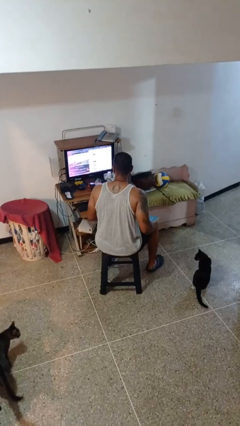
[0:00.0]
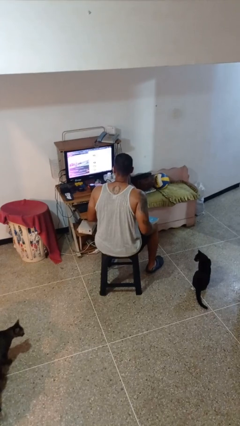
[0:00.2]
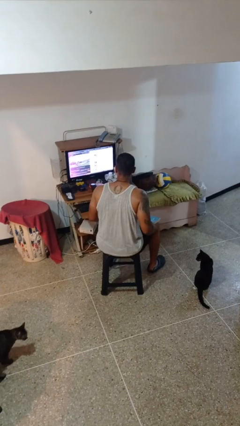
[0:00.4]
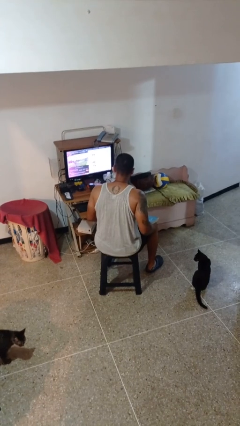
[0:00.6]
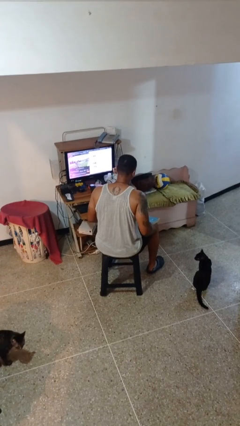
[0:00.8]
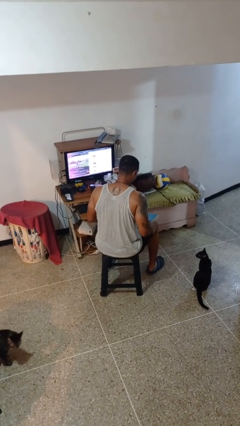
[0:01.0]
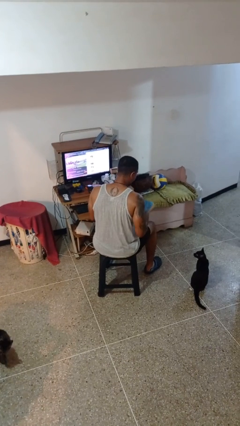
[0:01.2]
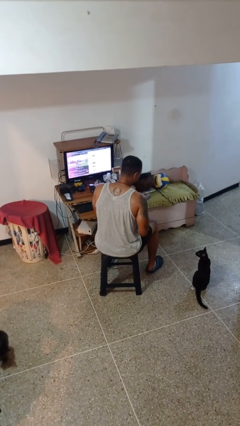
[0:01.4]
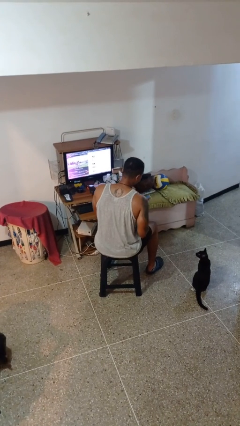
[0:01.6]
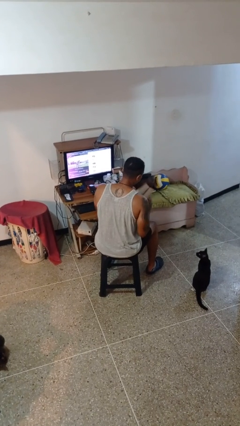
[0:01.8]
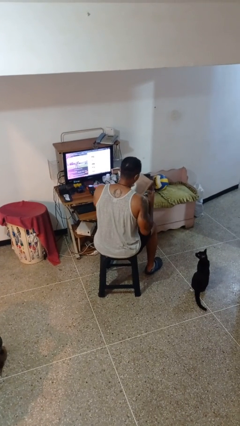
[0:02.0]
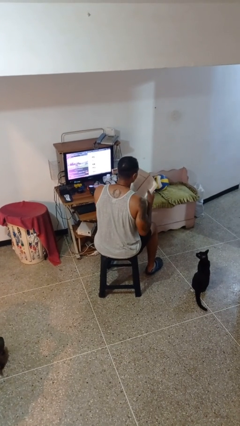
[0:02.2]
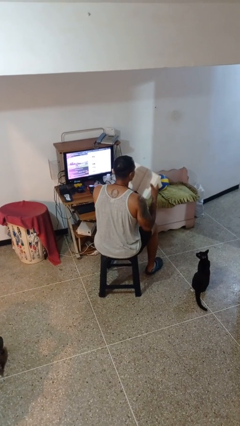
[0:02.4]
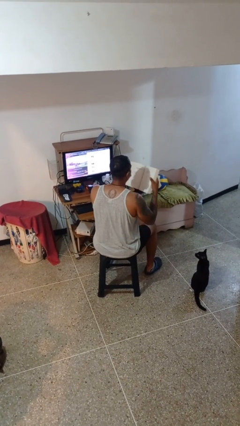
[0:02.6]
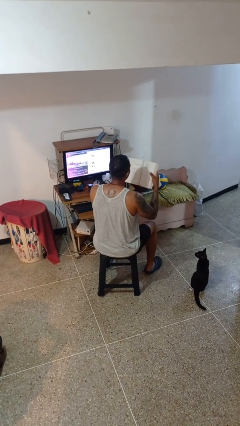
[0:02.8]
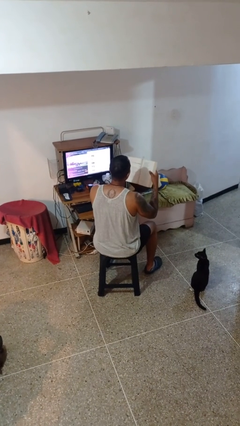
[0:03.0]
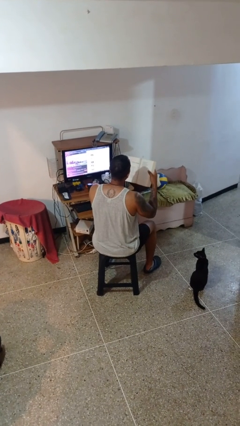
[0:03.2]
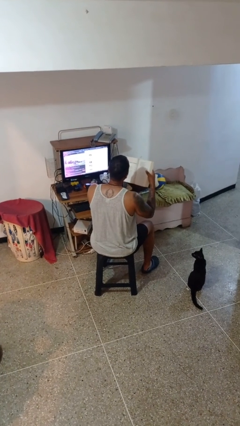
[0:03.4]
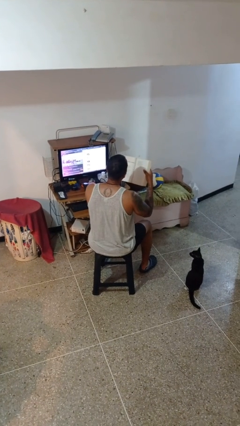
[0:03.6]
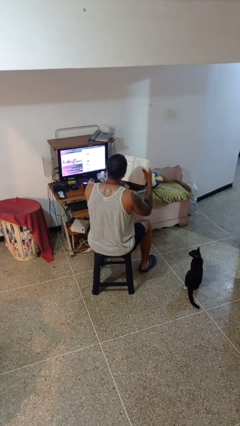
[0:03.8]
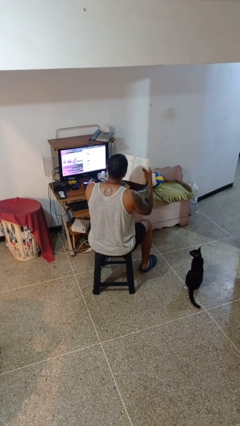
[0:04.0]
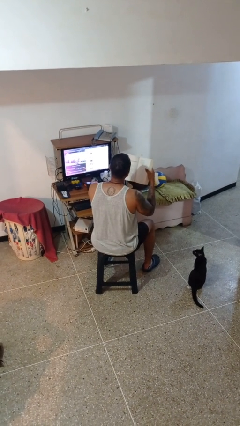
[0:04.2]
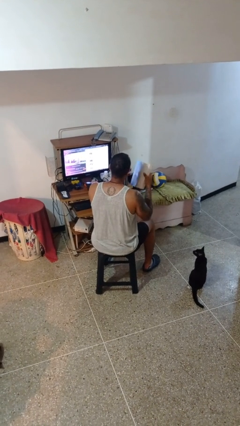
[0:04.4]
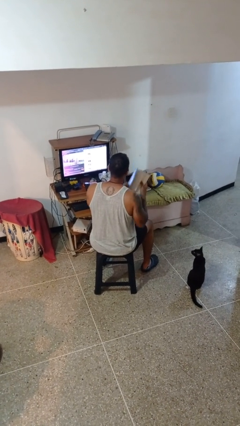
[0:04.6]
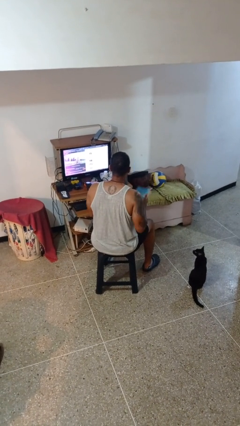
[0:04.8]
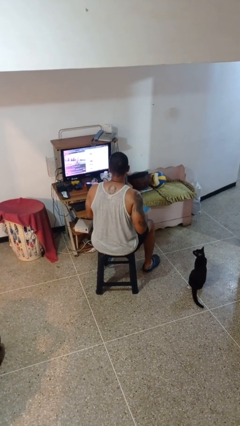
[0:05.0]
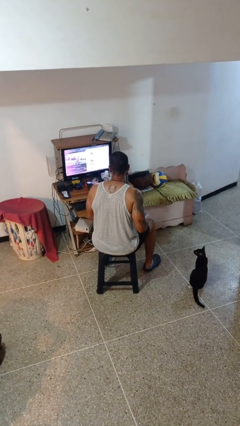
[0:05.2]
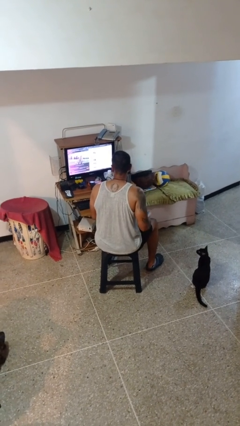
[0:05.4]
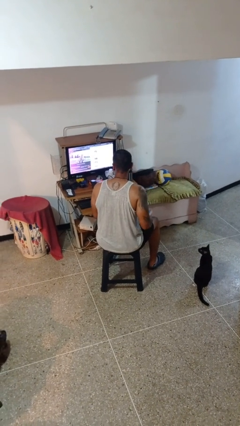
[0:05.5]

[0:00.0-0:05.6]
person reads book

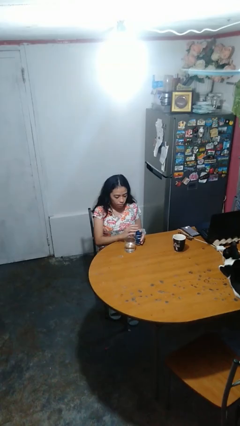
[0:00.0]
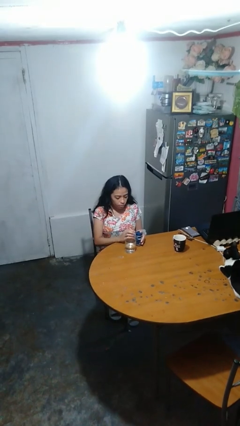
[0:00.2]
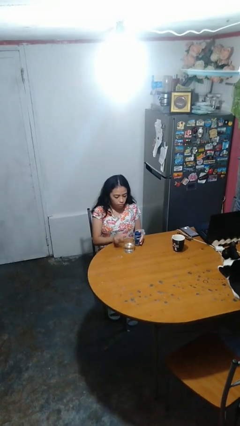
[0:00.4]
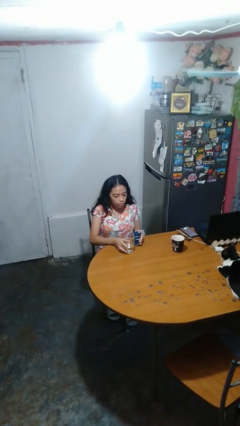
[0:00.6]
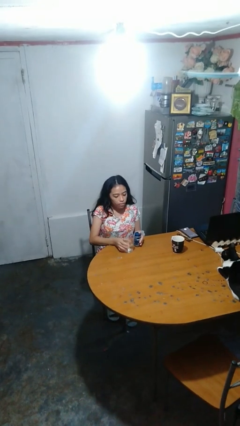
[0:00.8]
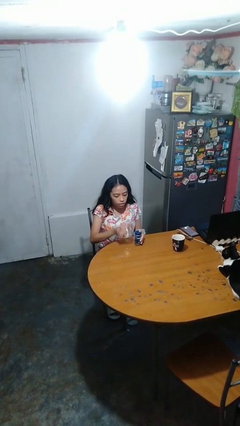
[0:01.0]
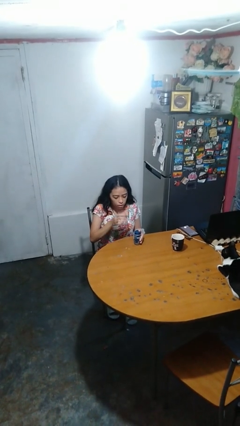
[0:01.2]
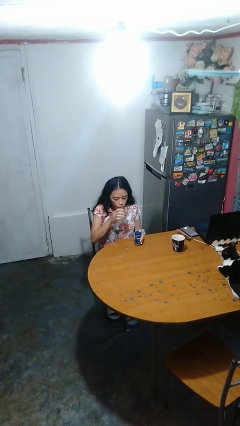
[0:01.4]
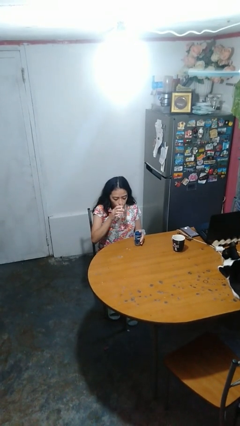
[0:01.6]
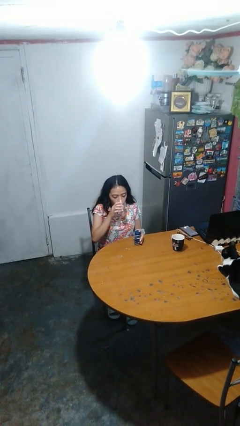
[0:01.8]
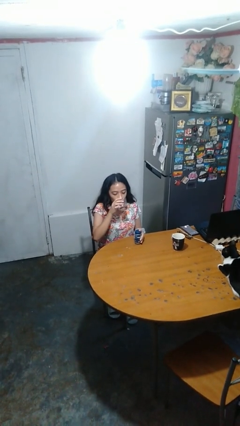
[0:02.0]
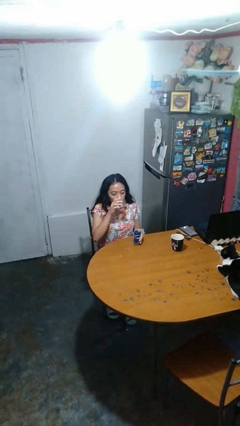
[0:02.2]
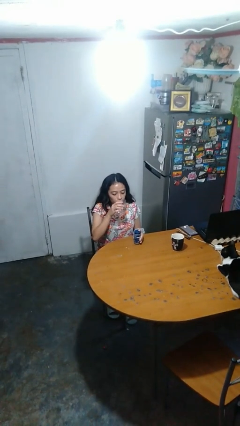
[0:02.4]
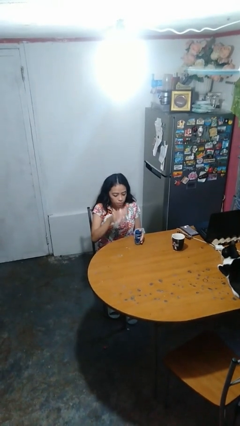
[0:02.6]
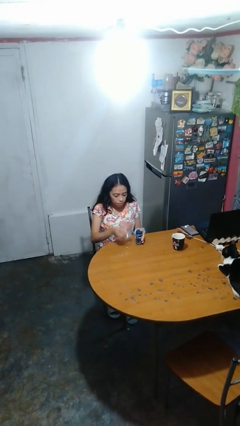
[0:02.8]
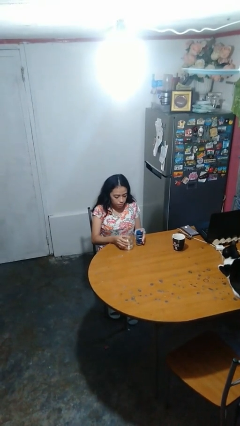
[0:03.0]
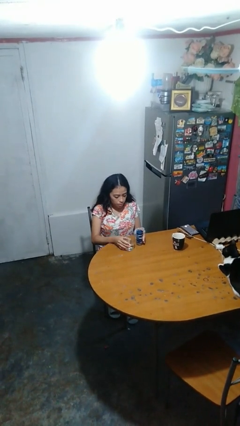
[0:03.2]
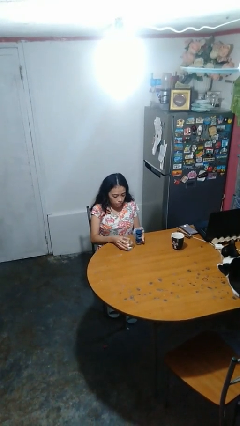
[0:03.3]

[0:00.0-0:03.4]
person drinks from cup

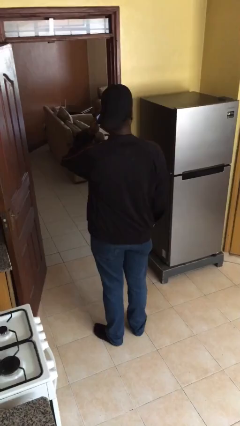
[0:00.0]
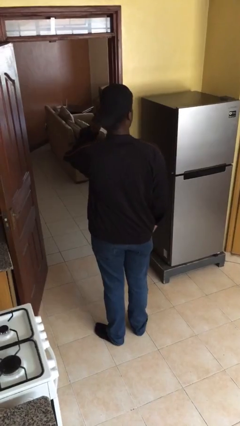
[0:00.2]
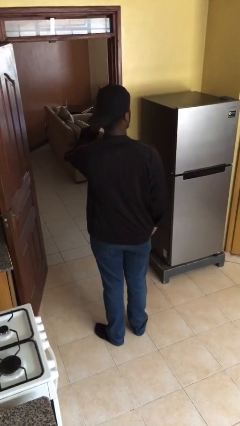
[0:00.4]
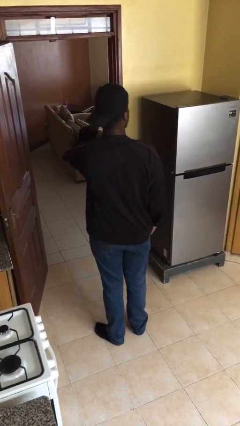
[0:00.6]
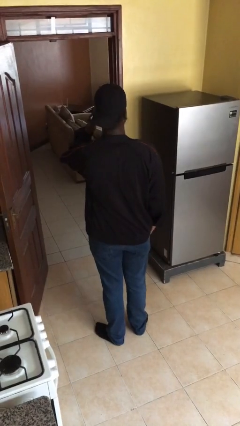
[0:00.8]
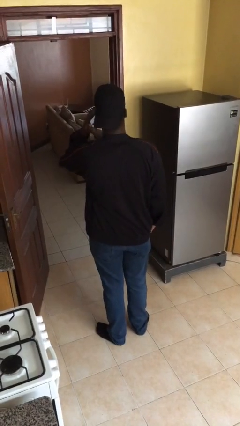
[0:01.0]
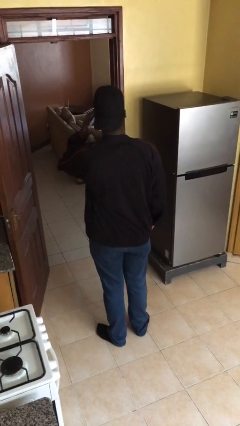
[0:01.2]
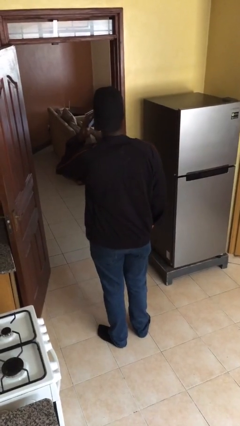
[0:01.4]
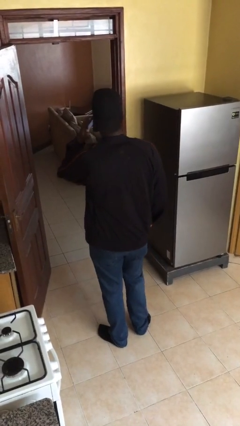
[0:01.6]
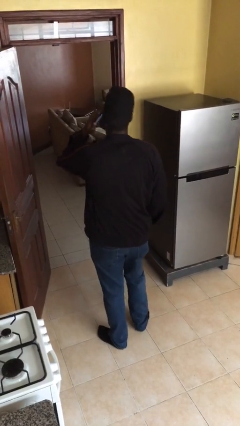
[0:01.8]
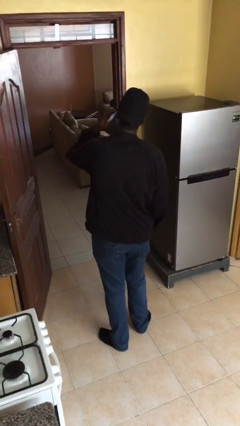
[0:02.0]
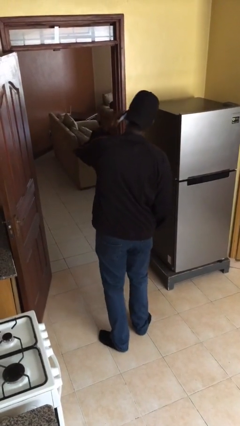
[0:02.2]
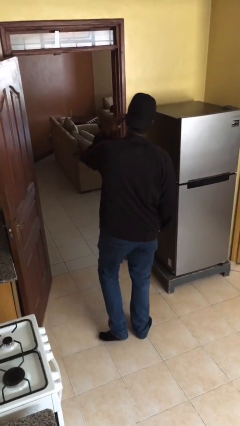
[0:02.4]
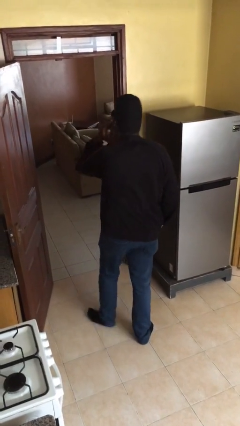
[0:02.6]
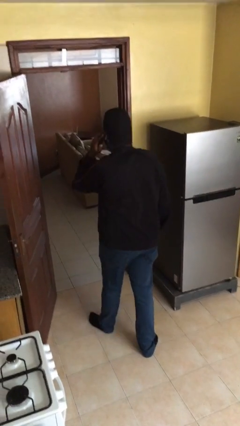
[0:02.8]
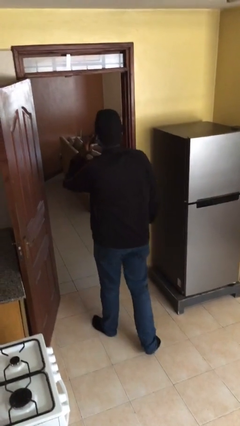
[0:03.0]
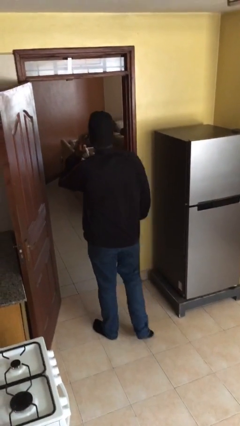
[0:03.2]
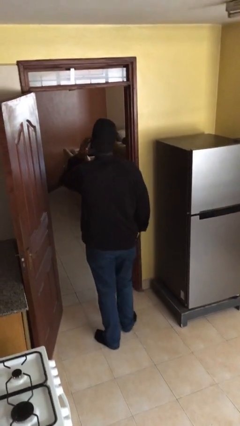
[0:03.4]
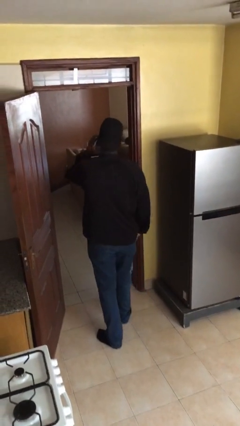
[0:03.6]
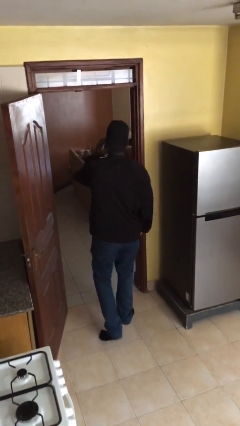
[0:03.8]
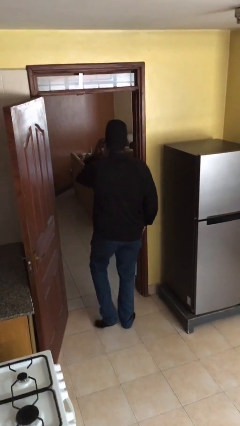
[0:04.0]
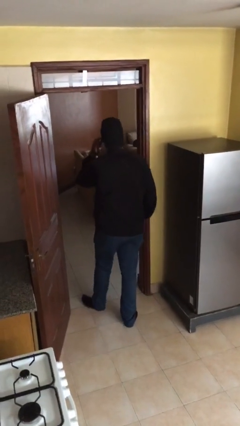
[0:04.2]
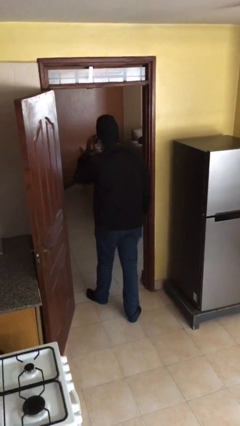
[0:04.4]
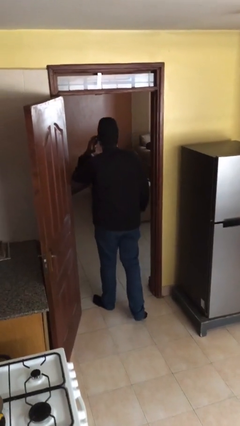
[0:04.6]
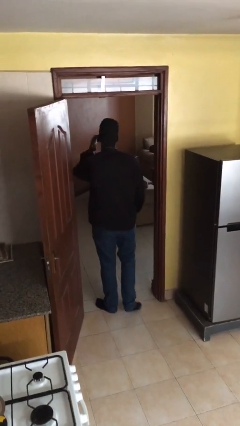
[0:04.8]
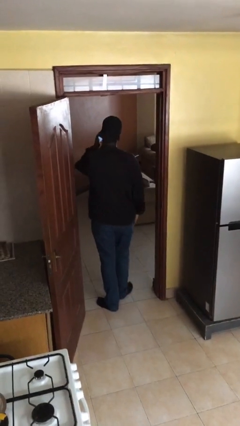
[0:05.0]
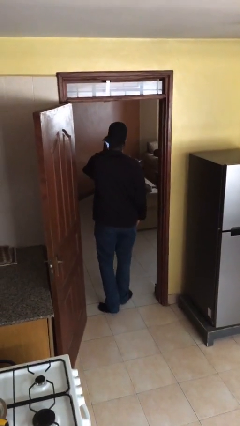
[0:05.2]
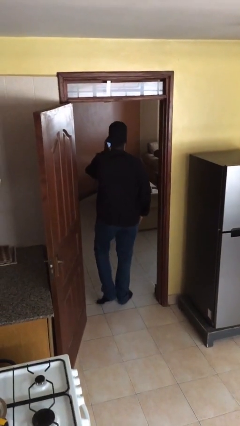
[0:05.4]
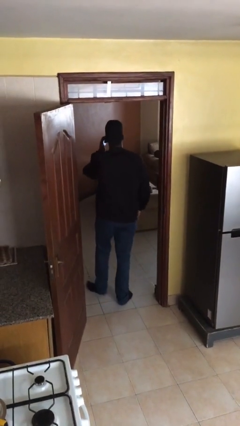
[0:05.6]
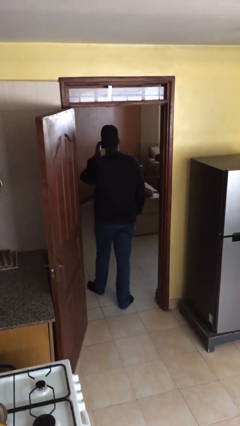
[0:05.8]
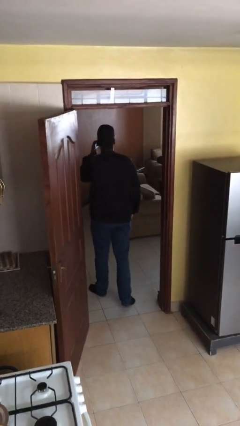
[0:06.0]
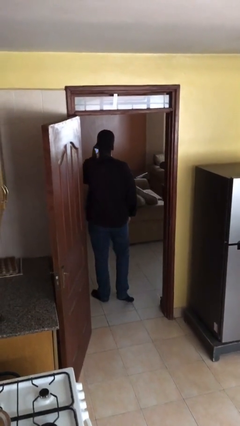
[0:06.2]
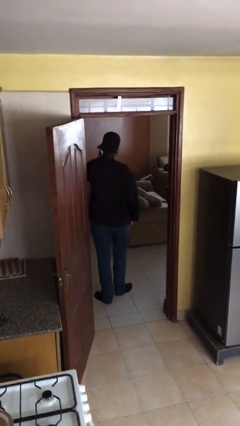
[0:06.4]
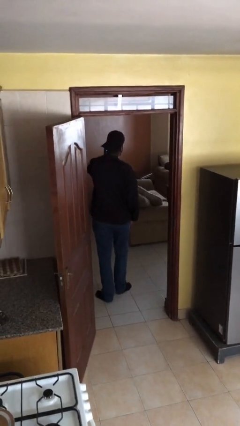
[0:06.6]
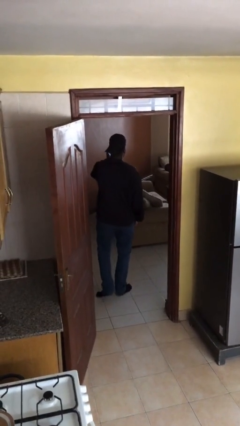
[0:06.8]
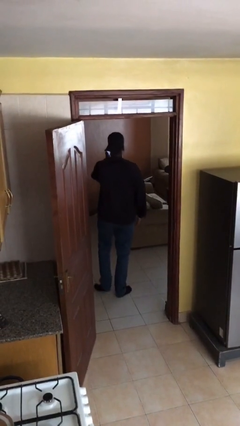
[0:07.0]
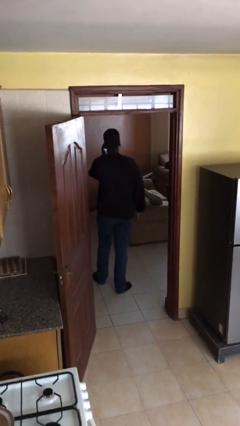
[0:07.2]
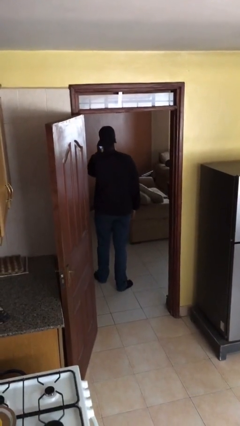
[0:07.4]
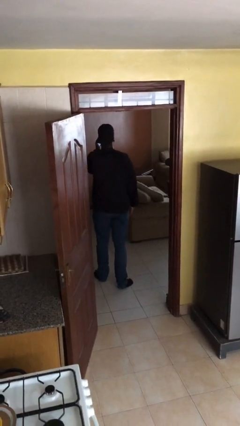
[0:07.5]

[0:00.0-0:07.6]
person exits scene through structure

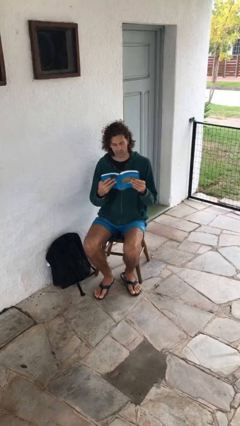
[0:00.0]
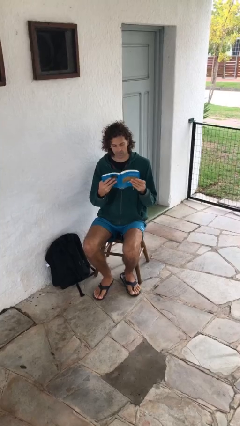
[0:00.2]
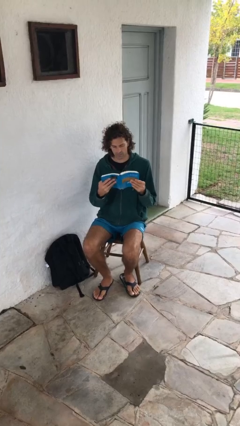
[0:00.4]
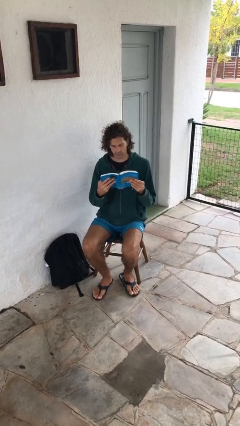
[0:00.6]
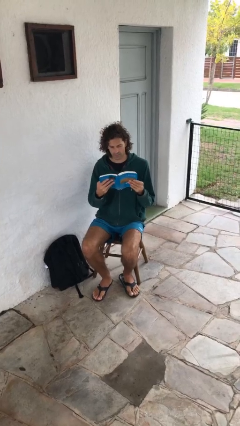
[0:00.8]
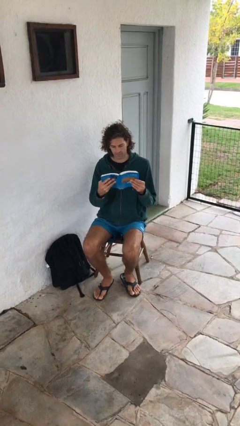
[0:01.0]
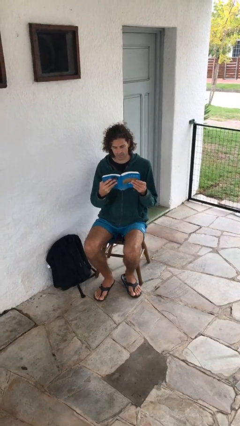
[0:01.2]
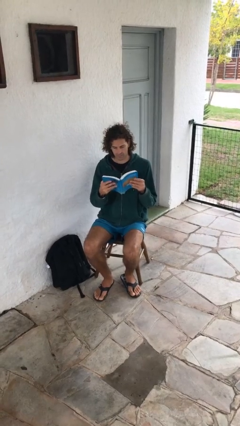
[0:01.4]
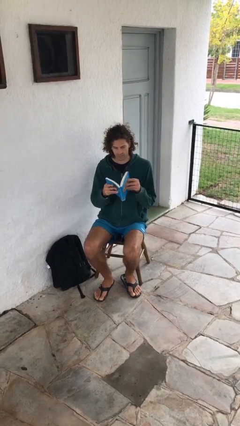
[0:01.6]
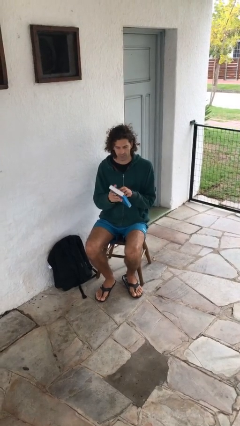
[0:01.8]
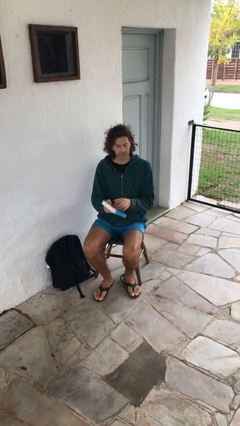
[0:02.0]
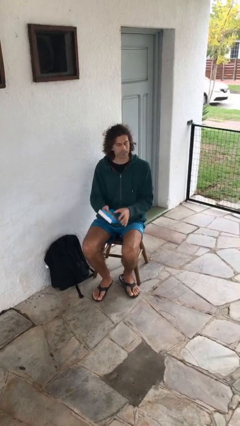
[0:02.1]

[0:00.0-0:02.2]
person reads document
